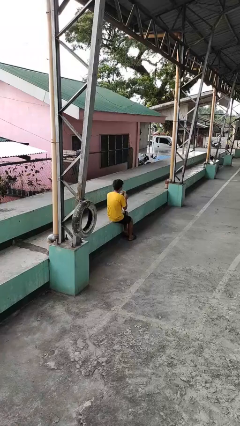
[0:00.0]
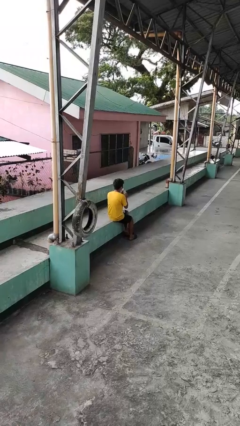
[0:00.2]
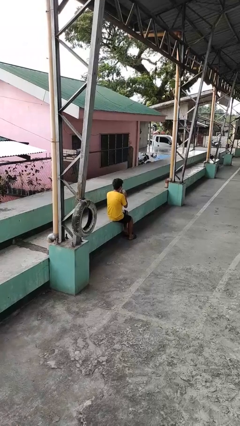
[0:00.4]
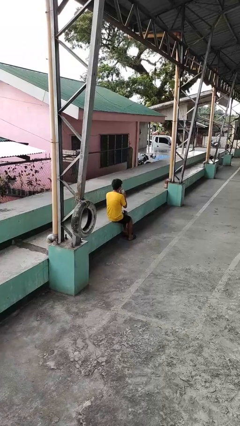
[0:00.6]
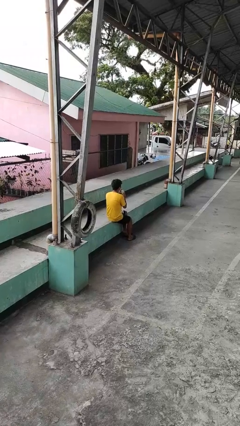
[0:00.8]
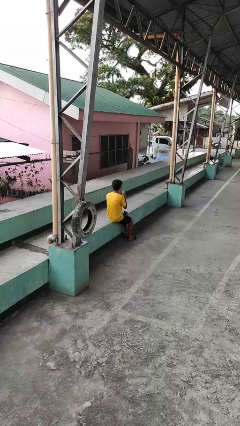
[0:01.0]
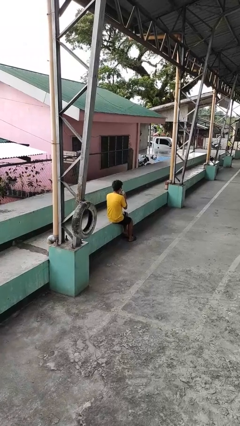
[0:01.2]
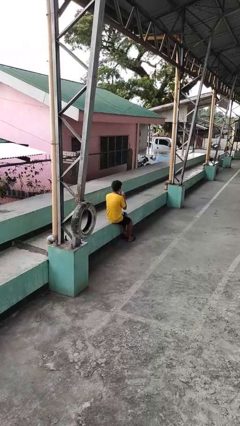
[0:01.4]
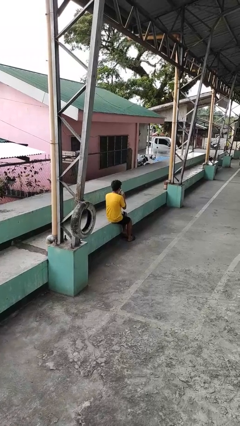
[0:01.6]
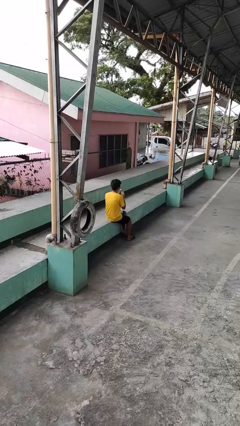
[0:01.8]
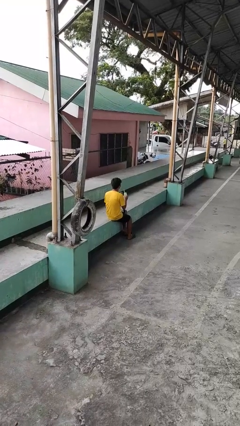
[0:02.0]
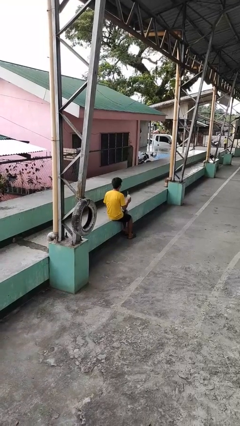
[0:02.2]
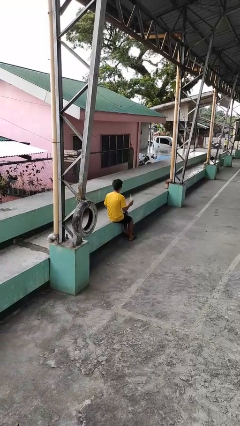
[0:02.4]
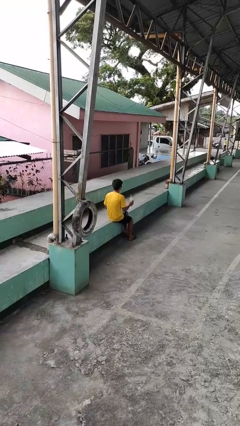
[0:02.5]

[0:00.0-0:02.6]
person drinks from straw

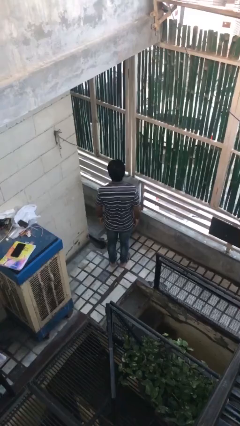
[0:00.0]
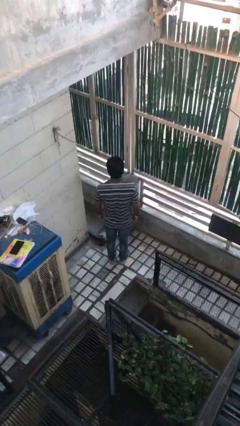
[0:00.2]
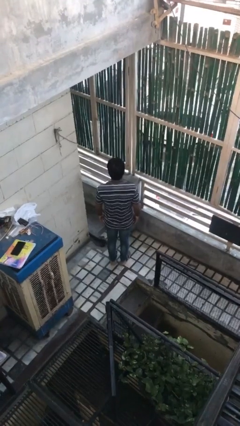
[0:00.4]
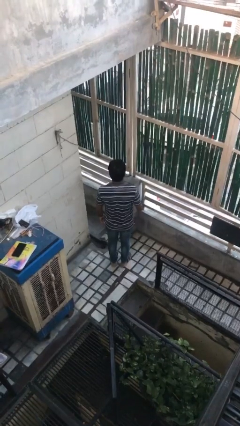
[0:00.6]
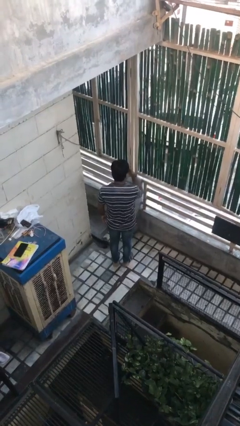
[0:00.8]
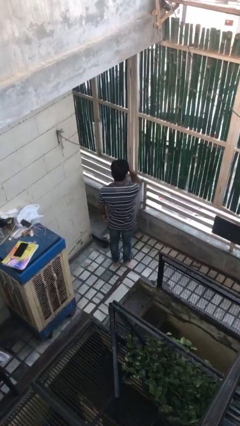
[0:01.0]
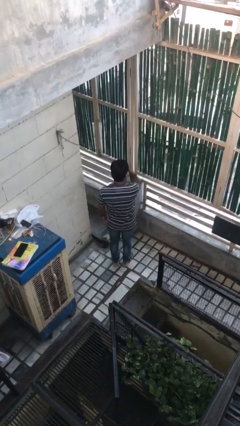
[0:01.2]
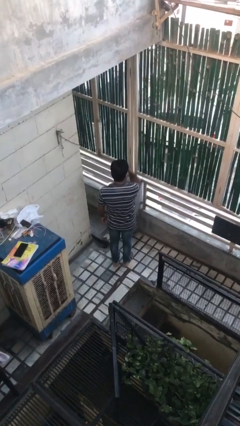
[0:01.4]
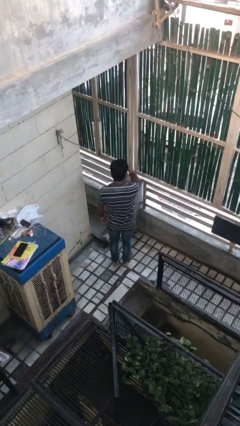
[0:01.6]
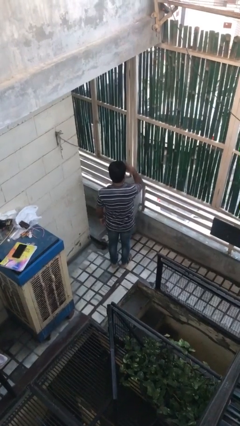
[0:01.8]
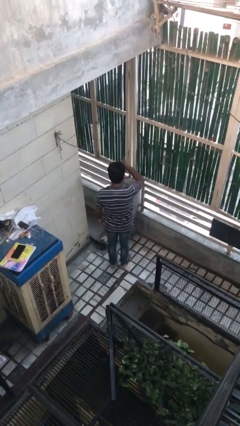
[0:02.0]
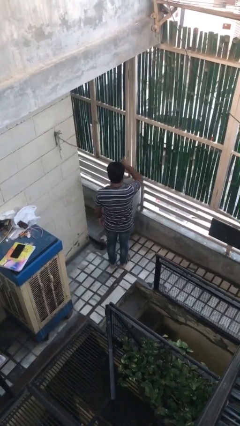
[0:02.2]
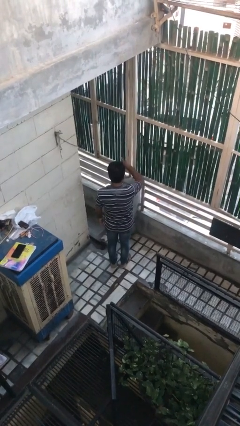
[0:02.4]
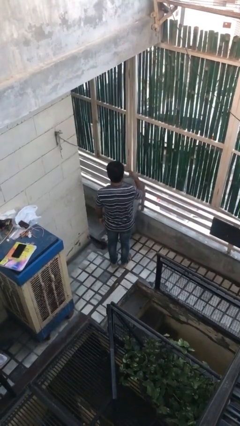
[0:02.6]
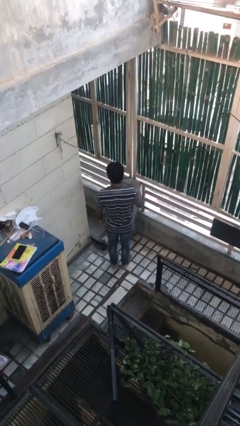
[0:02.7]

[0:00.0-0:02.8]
person gestures watch closely

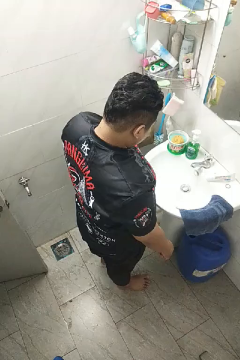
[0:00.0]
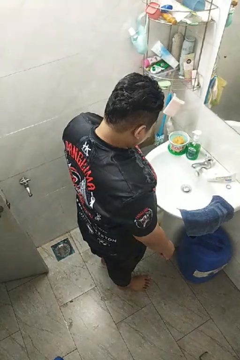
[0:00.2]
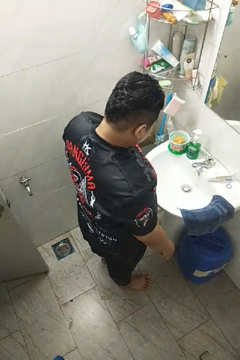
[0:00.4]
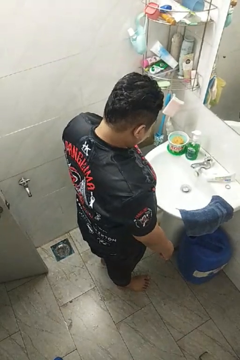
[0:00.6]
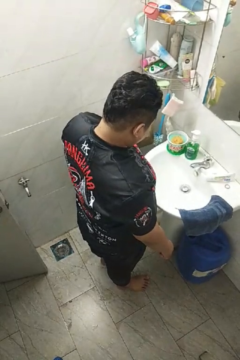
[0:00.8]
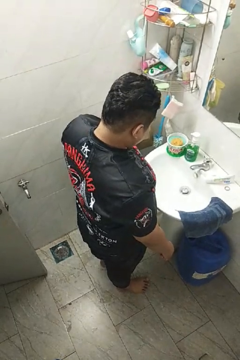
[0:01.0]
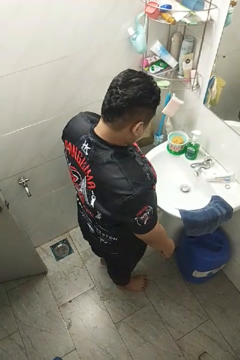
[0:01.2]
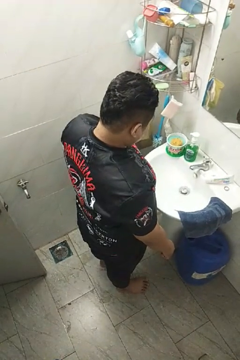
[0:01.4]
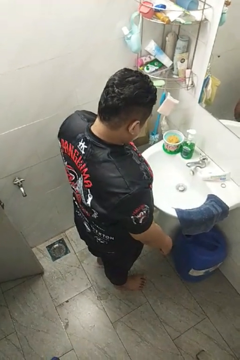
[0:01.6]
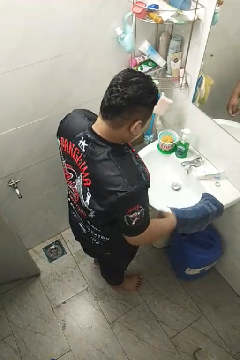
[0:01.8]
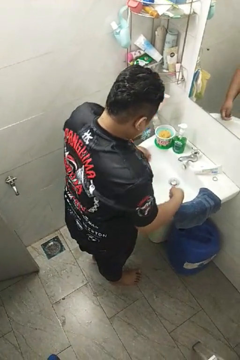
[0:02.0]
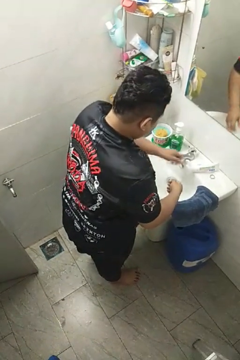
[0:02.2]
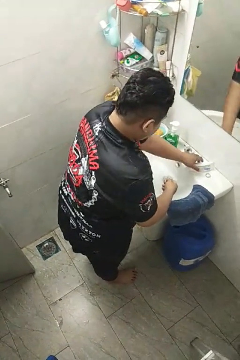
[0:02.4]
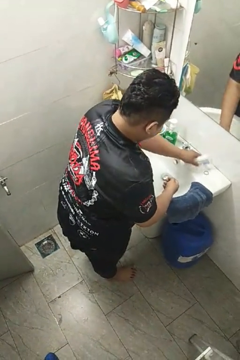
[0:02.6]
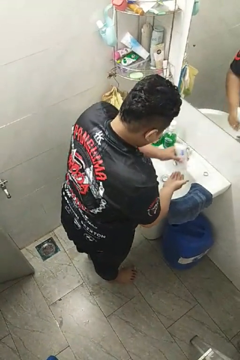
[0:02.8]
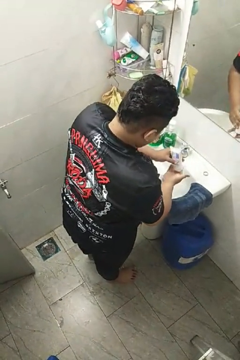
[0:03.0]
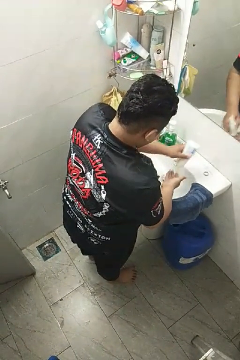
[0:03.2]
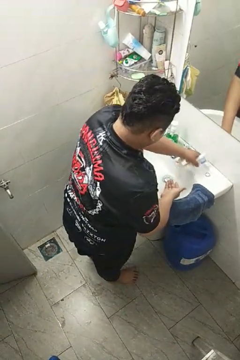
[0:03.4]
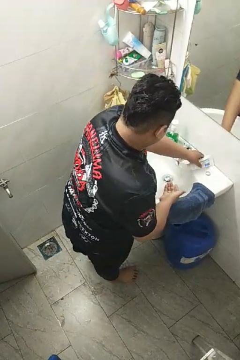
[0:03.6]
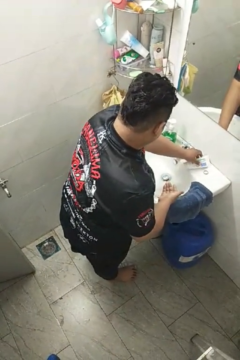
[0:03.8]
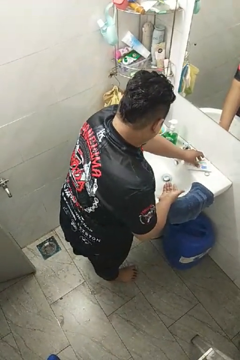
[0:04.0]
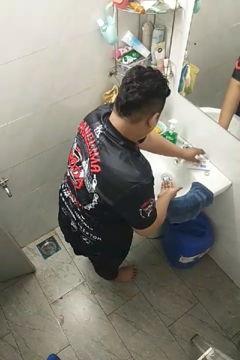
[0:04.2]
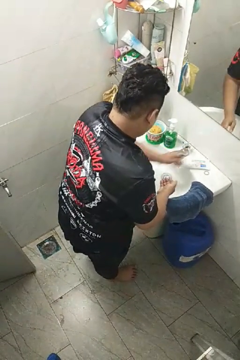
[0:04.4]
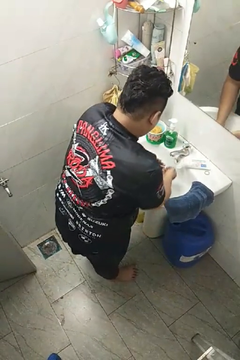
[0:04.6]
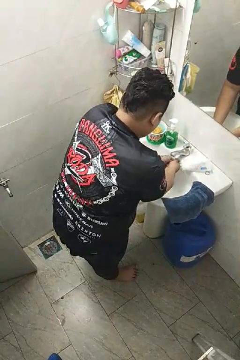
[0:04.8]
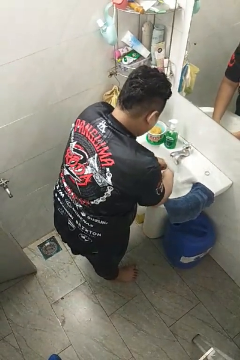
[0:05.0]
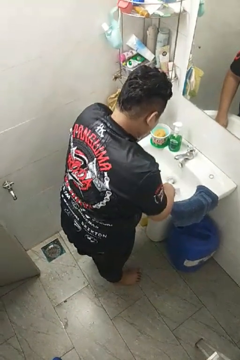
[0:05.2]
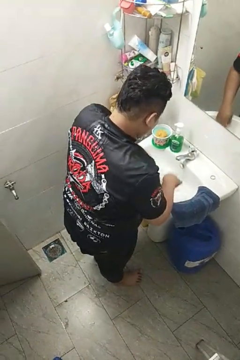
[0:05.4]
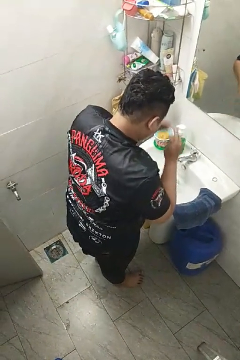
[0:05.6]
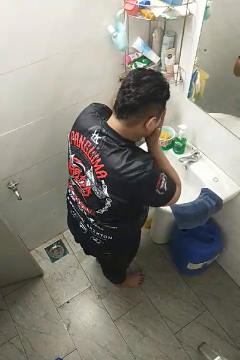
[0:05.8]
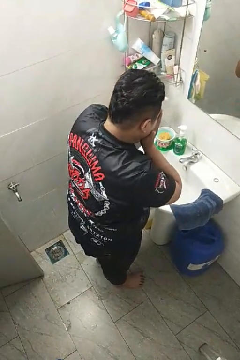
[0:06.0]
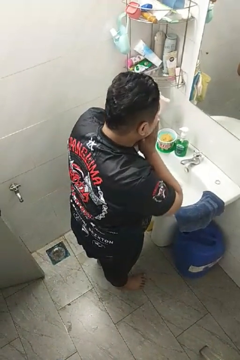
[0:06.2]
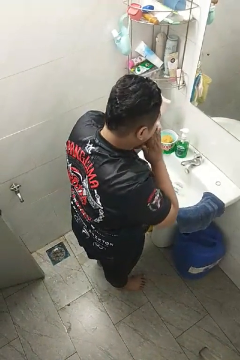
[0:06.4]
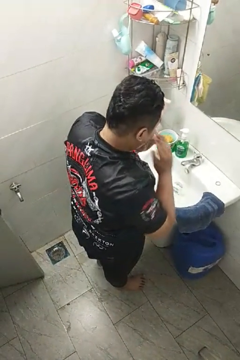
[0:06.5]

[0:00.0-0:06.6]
person washes face

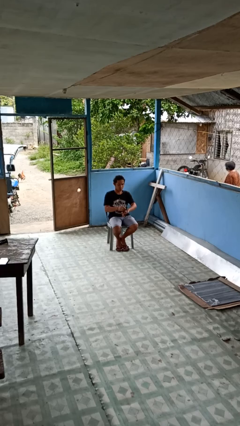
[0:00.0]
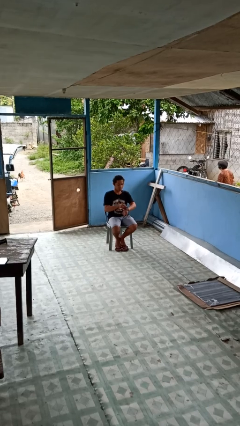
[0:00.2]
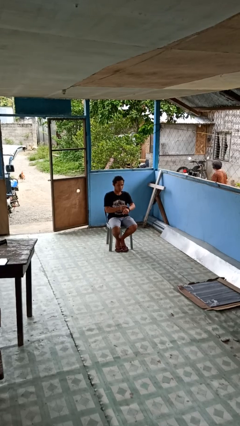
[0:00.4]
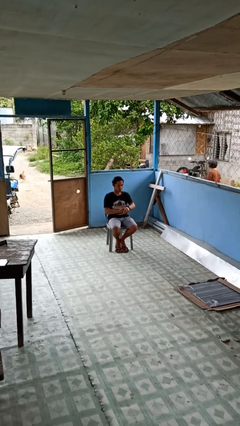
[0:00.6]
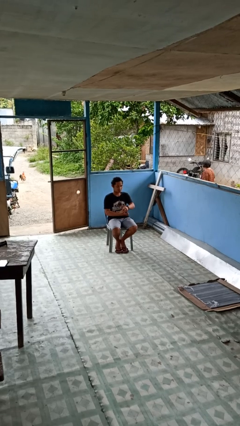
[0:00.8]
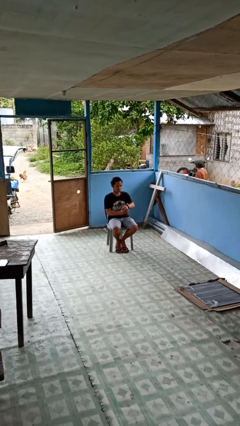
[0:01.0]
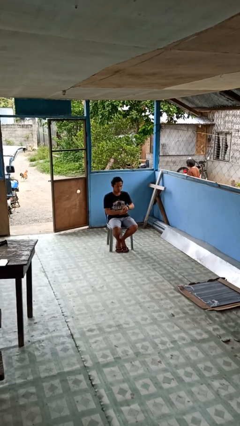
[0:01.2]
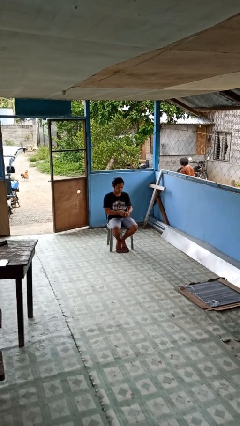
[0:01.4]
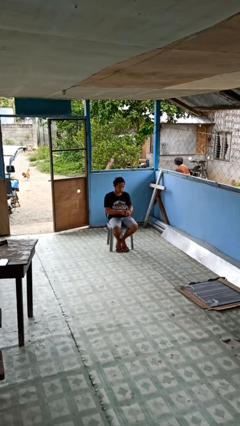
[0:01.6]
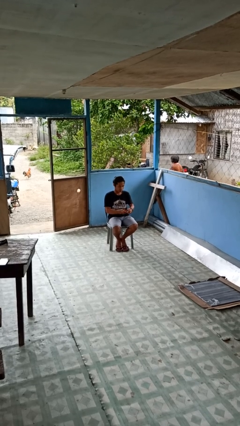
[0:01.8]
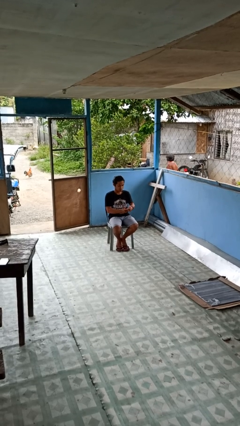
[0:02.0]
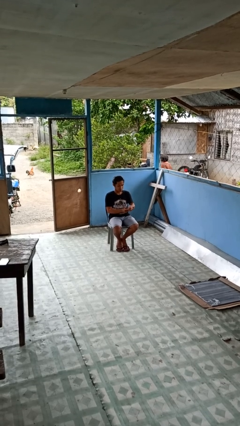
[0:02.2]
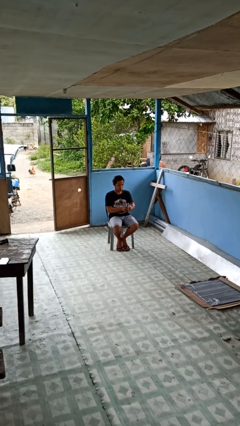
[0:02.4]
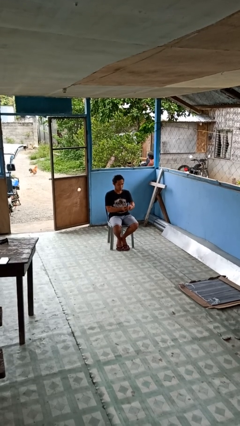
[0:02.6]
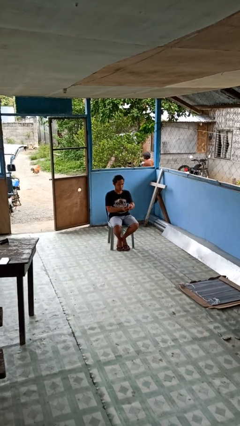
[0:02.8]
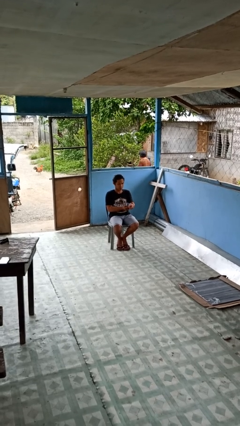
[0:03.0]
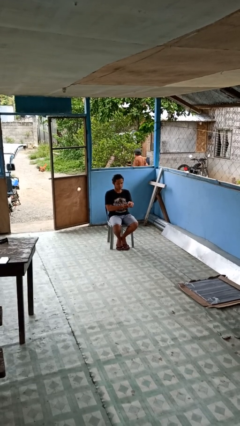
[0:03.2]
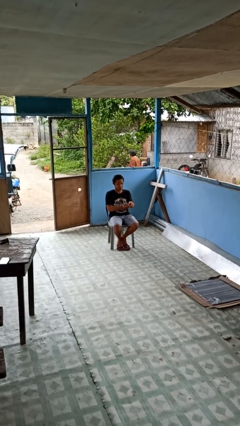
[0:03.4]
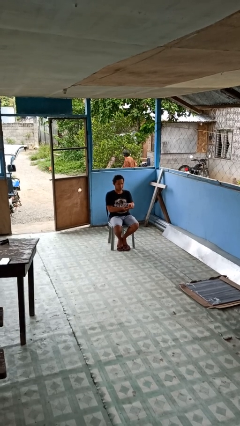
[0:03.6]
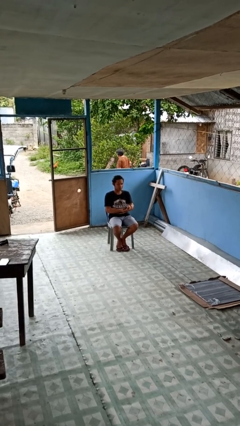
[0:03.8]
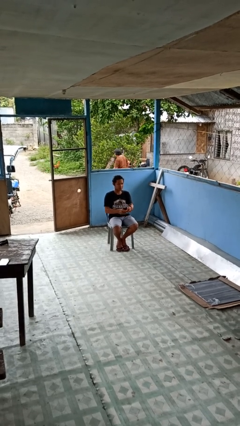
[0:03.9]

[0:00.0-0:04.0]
person puts on wristwatch

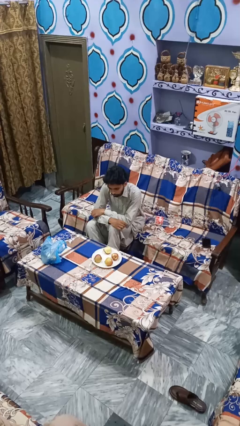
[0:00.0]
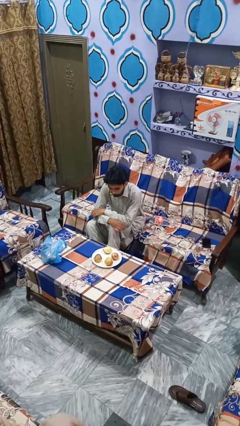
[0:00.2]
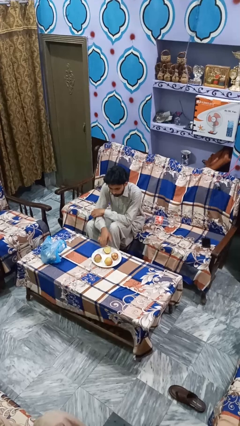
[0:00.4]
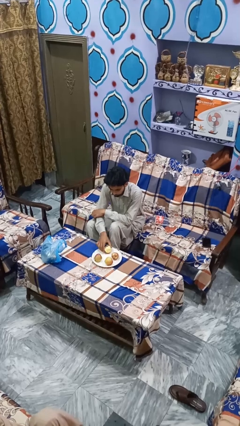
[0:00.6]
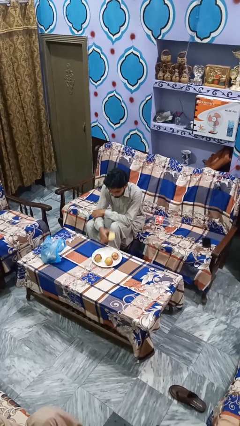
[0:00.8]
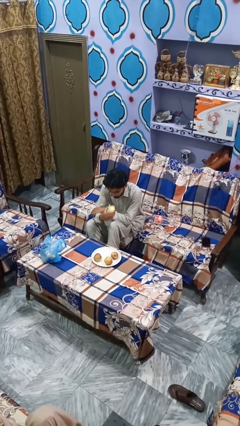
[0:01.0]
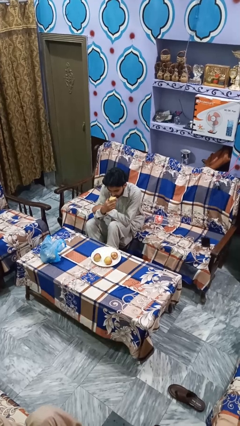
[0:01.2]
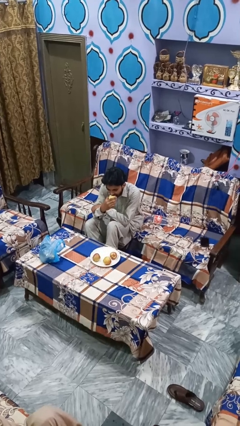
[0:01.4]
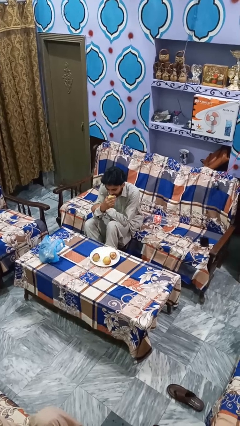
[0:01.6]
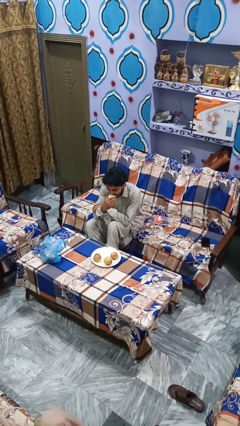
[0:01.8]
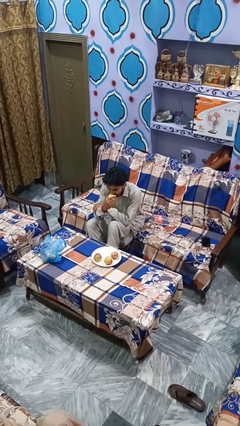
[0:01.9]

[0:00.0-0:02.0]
person eats apple

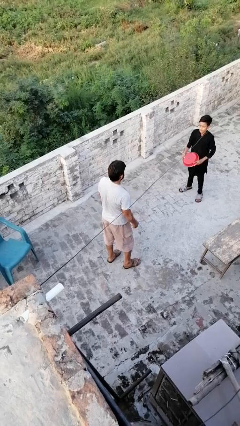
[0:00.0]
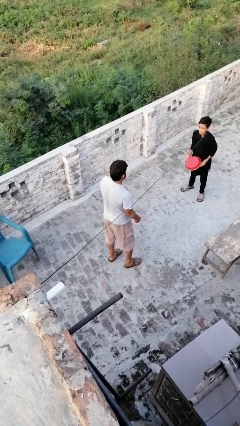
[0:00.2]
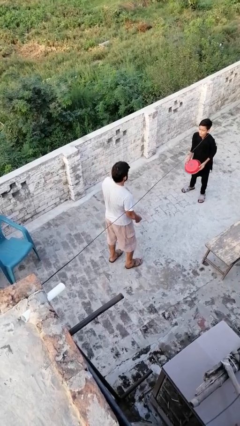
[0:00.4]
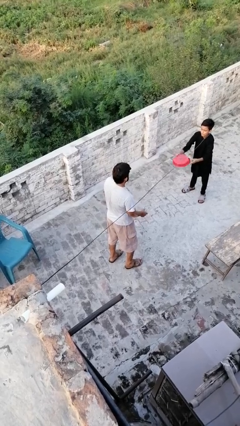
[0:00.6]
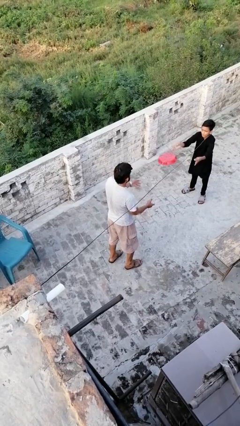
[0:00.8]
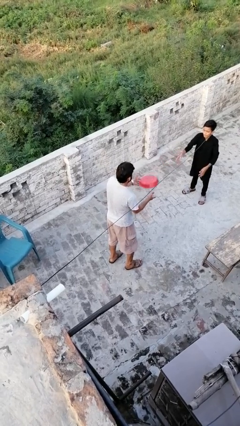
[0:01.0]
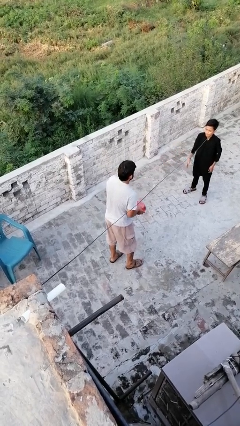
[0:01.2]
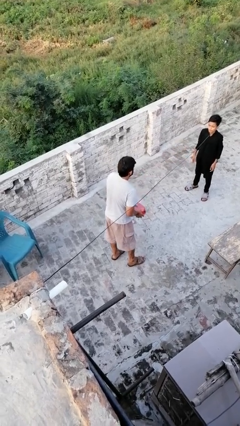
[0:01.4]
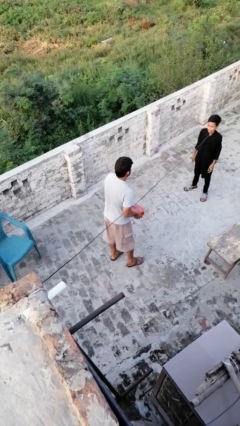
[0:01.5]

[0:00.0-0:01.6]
person catches object from person
